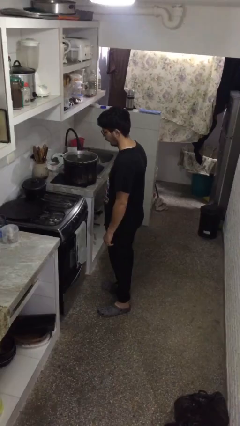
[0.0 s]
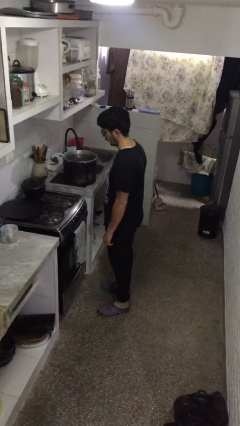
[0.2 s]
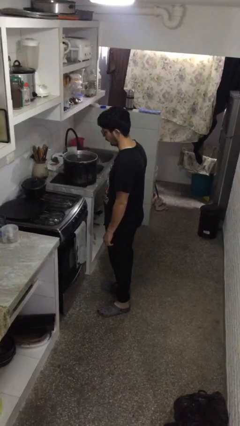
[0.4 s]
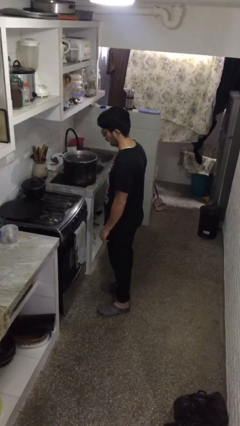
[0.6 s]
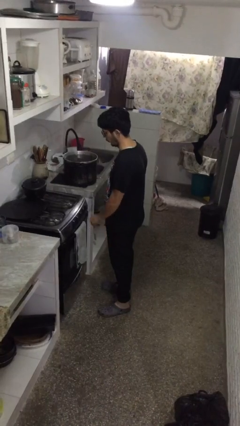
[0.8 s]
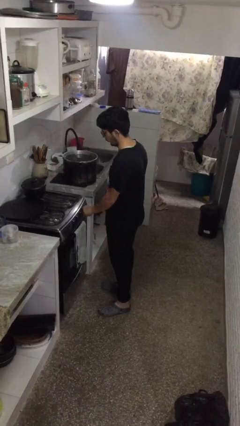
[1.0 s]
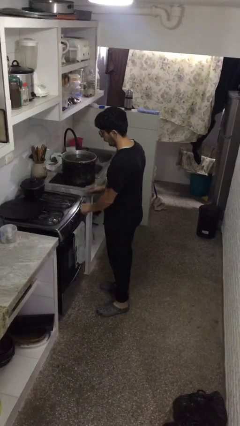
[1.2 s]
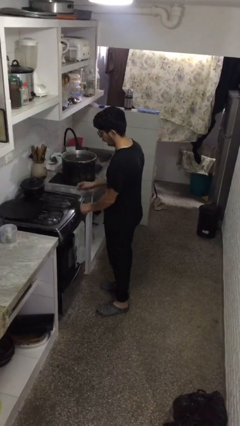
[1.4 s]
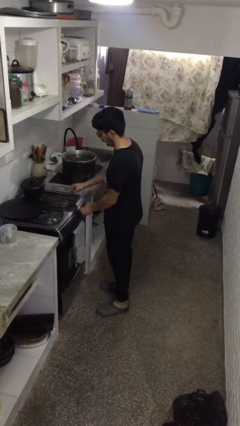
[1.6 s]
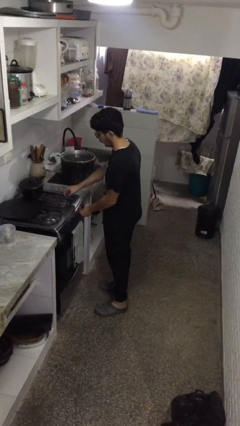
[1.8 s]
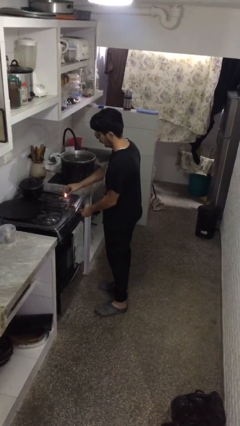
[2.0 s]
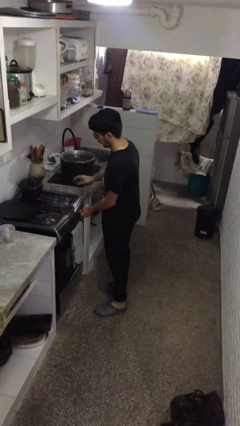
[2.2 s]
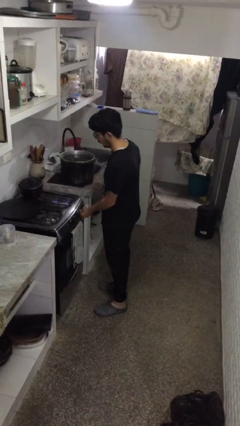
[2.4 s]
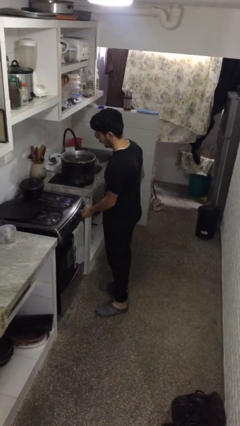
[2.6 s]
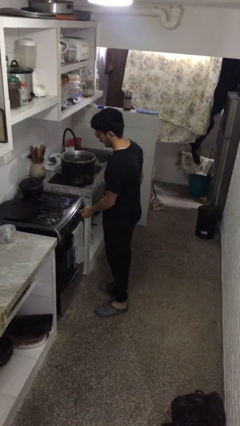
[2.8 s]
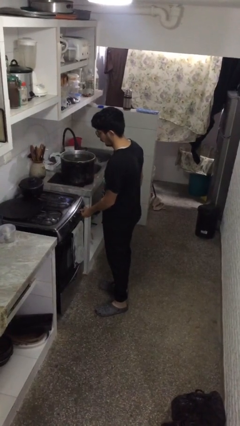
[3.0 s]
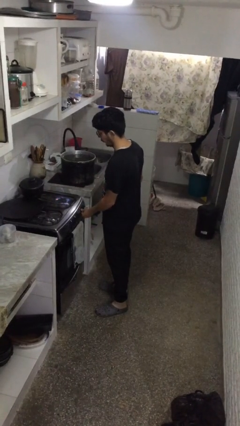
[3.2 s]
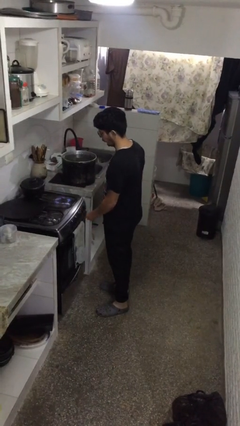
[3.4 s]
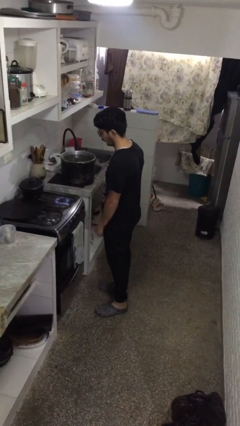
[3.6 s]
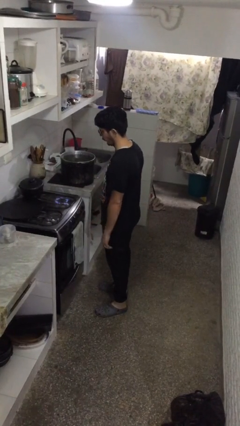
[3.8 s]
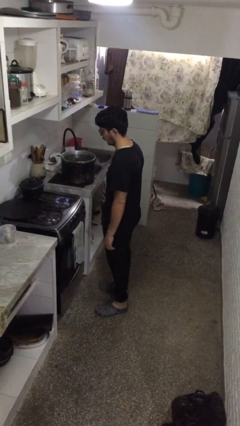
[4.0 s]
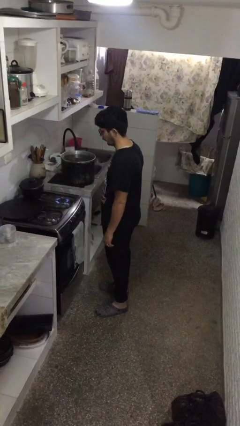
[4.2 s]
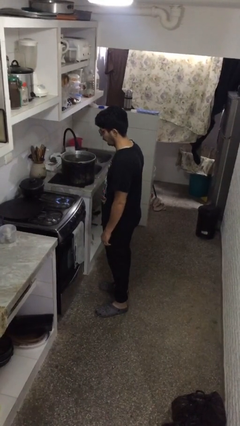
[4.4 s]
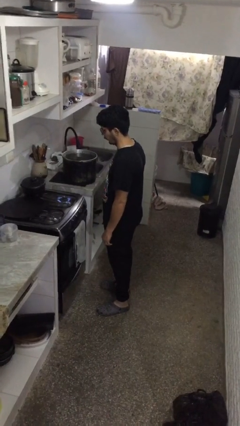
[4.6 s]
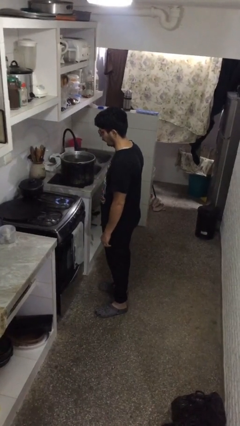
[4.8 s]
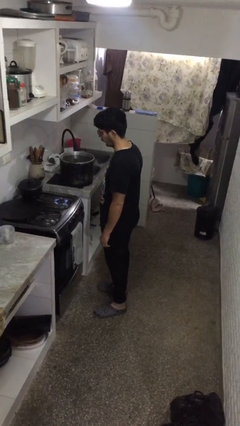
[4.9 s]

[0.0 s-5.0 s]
person turns on stovetop

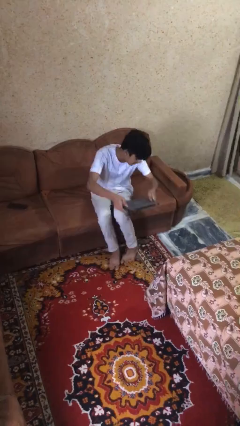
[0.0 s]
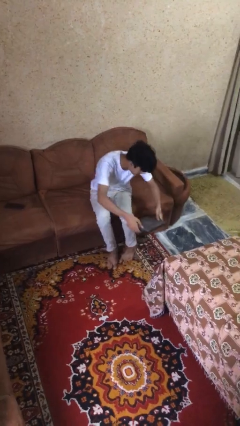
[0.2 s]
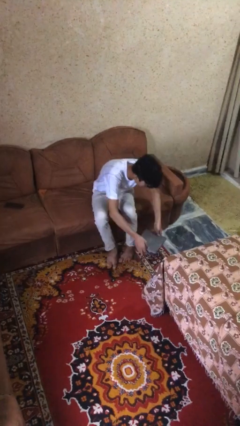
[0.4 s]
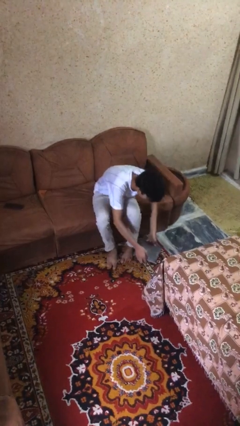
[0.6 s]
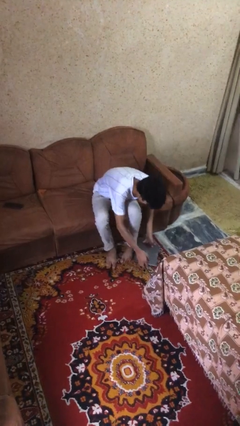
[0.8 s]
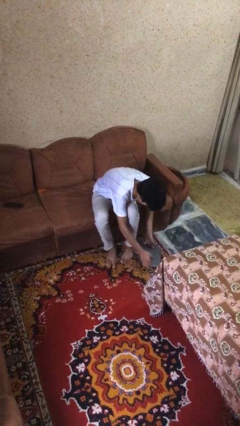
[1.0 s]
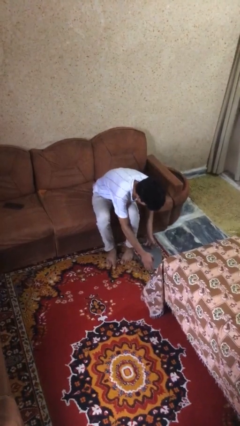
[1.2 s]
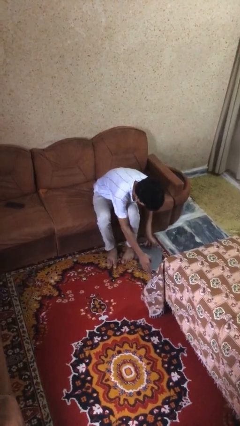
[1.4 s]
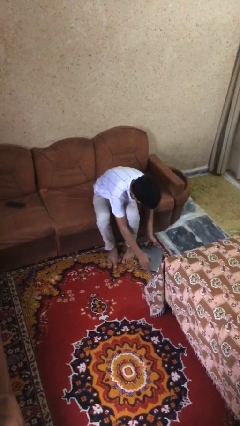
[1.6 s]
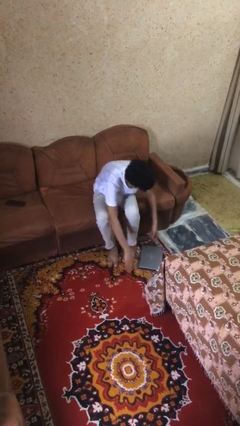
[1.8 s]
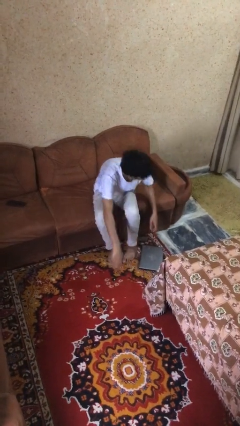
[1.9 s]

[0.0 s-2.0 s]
person puts down object on floor

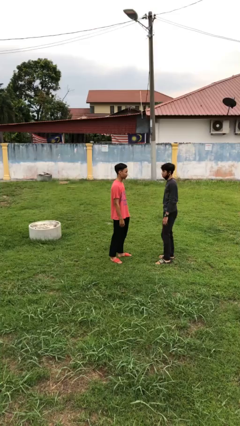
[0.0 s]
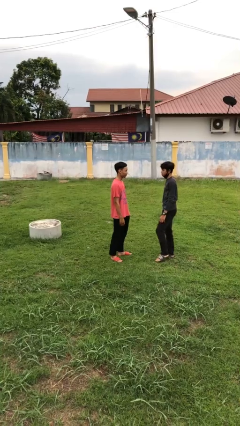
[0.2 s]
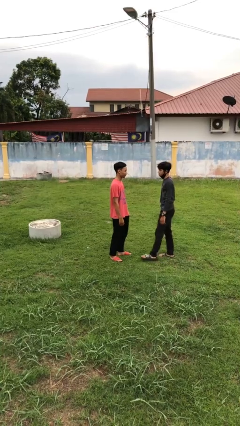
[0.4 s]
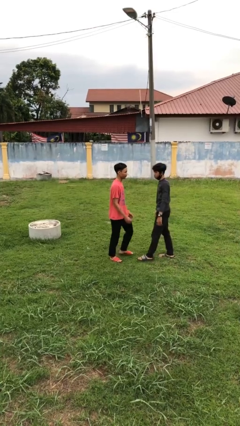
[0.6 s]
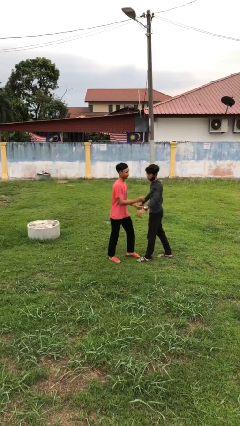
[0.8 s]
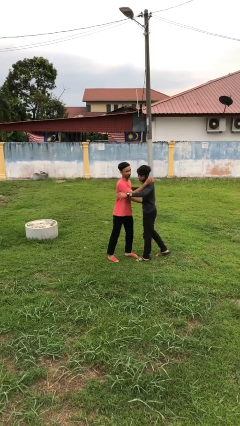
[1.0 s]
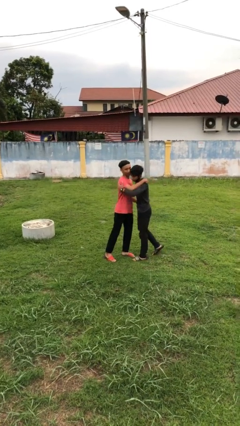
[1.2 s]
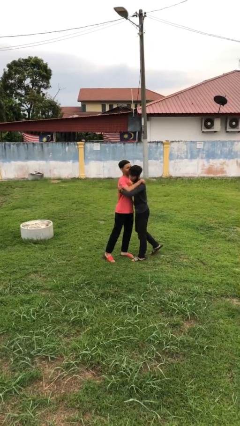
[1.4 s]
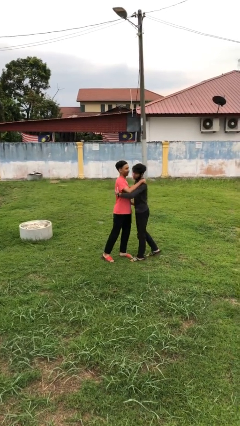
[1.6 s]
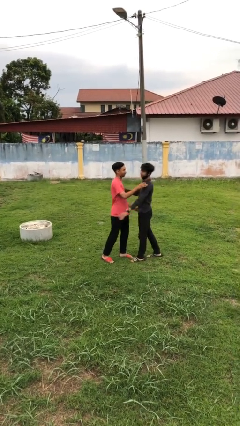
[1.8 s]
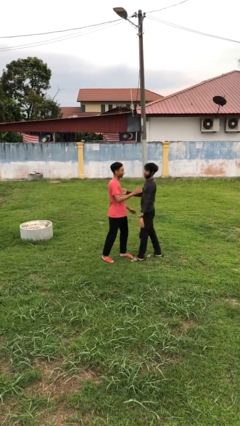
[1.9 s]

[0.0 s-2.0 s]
person embraces person

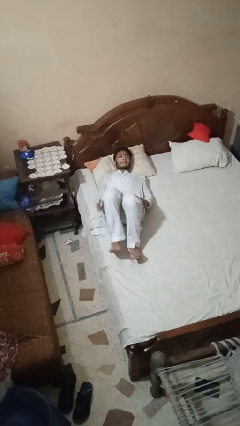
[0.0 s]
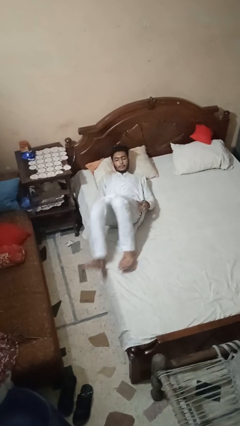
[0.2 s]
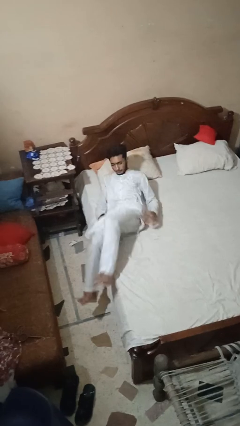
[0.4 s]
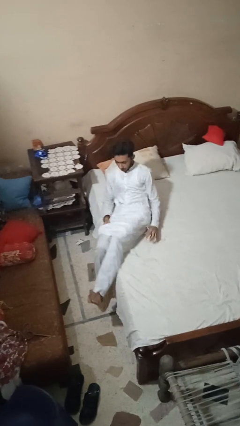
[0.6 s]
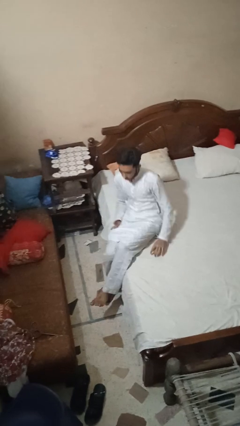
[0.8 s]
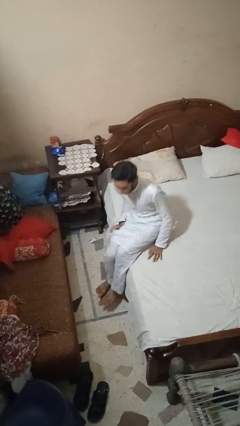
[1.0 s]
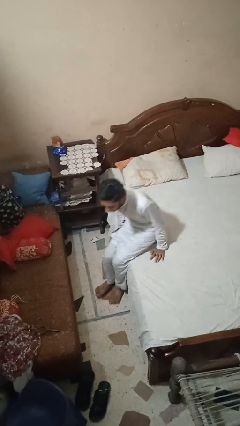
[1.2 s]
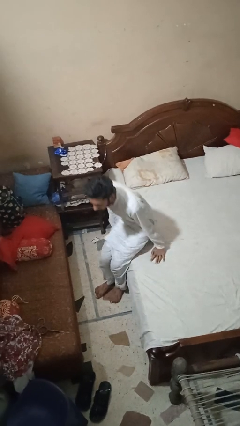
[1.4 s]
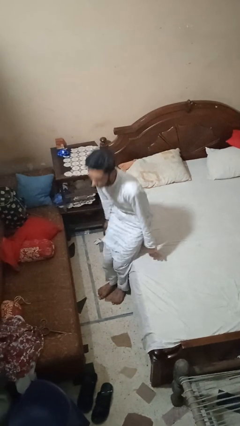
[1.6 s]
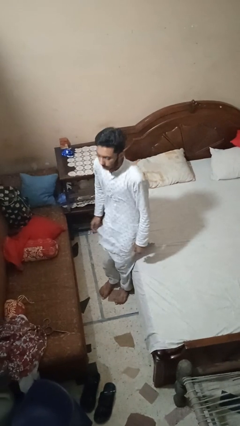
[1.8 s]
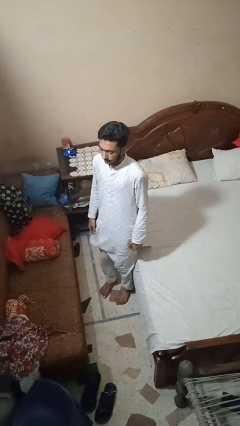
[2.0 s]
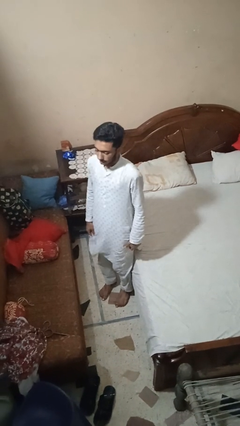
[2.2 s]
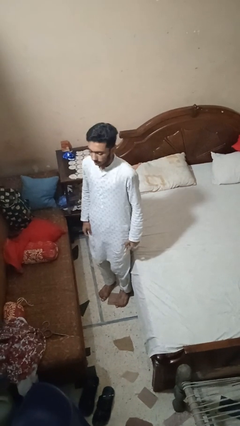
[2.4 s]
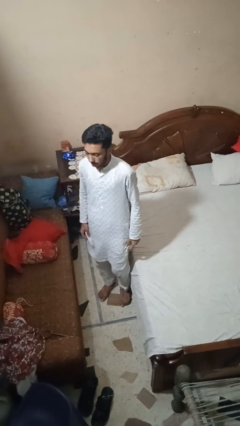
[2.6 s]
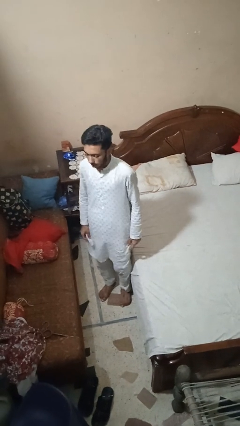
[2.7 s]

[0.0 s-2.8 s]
person stands up

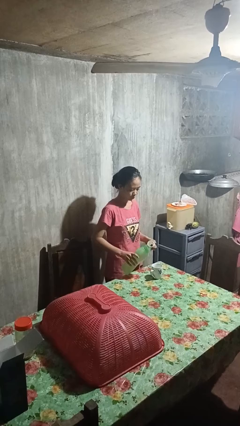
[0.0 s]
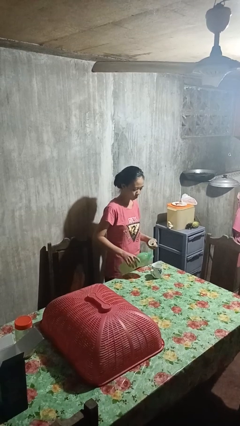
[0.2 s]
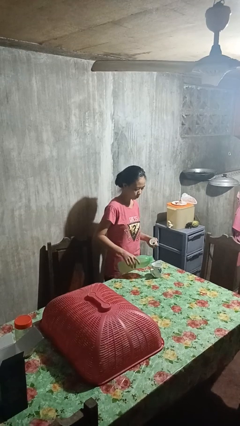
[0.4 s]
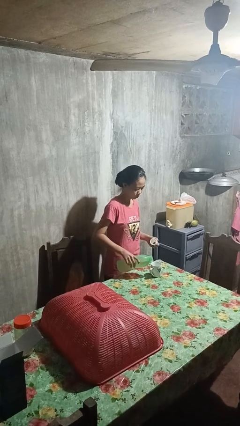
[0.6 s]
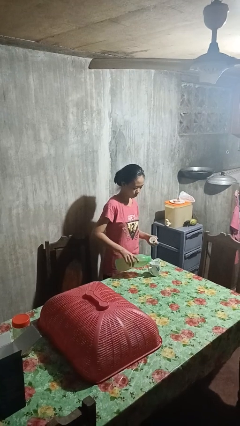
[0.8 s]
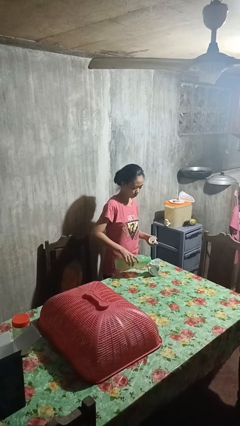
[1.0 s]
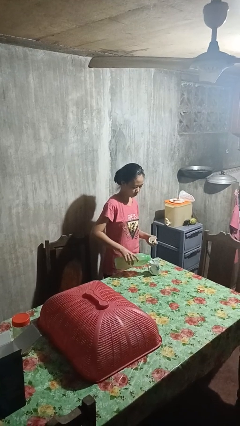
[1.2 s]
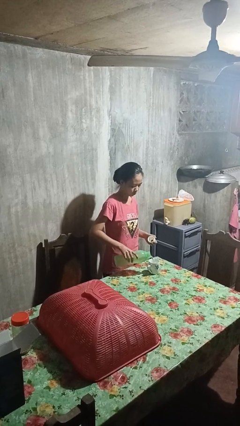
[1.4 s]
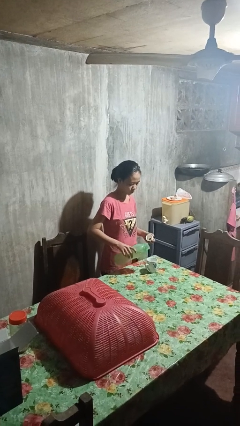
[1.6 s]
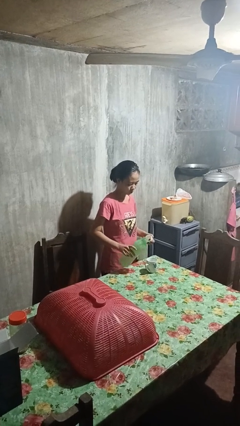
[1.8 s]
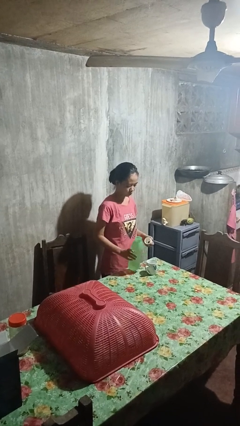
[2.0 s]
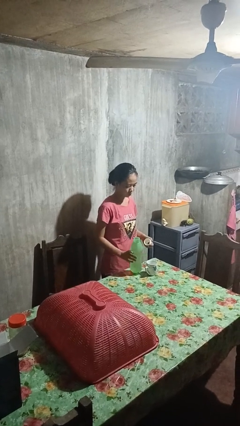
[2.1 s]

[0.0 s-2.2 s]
person pours liquid into cup

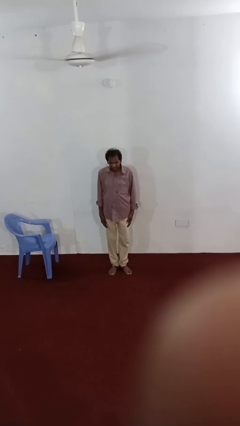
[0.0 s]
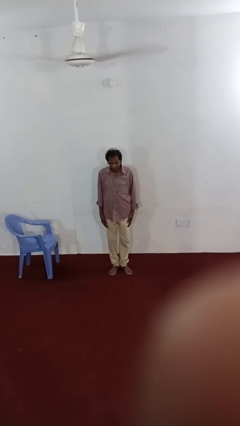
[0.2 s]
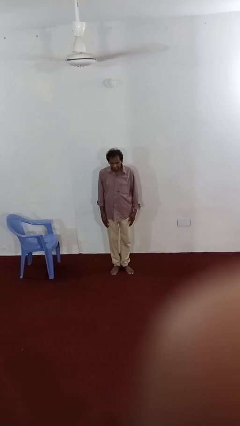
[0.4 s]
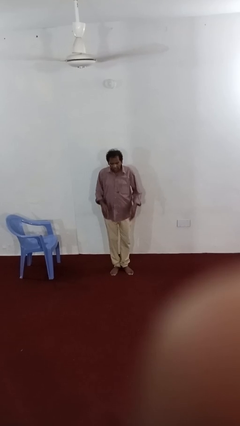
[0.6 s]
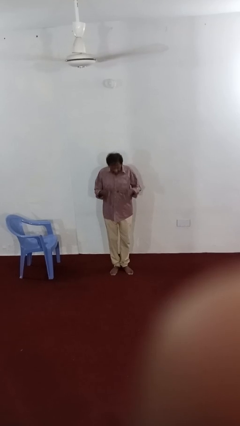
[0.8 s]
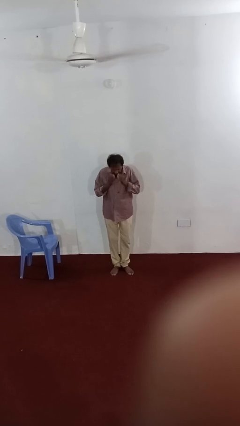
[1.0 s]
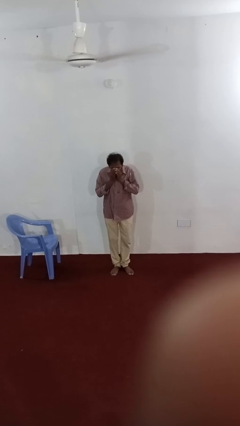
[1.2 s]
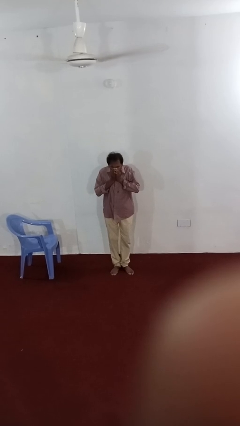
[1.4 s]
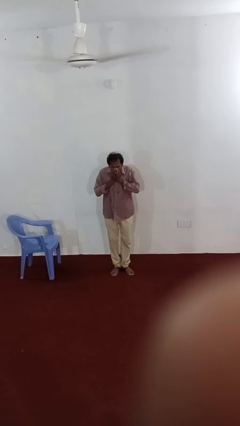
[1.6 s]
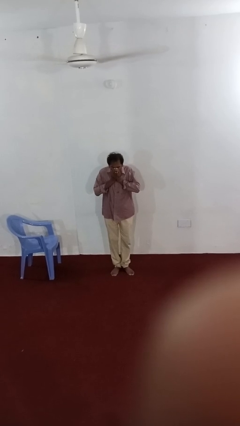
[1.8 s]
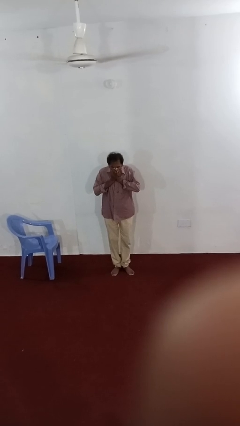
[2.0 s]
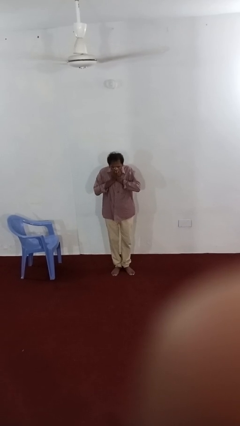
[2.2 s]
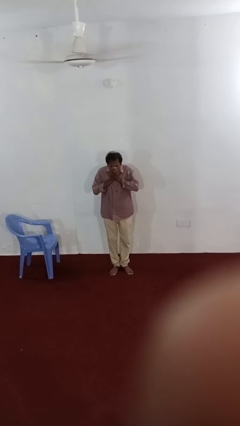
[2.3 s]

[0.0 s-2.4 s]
person sneezes into hand

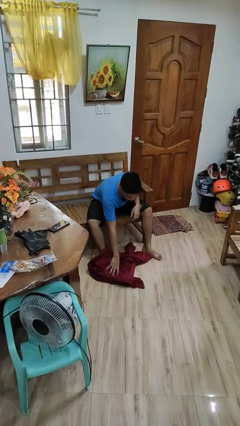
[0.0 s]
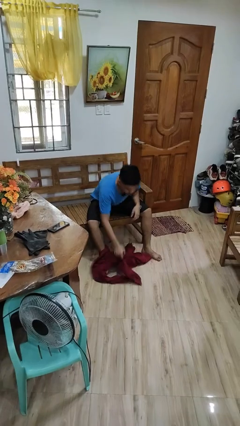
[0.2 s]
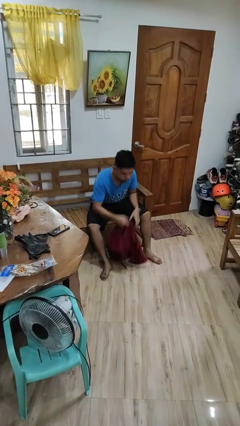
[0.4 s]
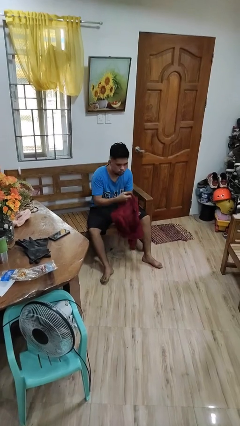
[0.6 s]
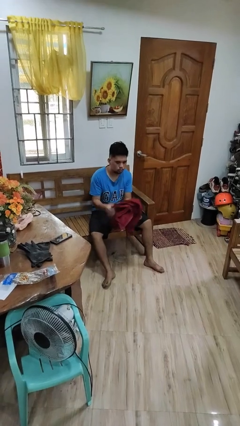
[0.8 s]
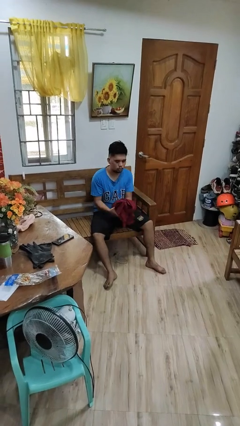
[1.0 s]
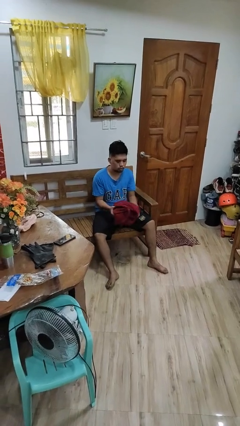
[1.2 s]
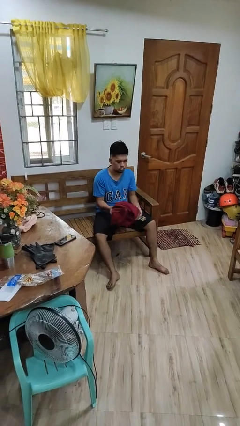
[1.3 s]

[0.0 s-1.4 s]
person picks up object from floor
